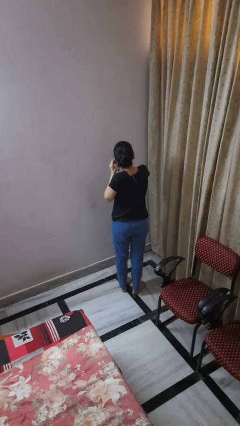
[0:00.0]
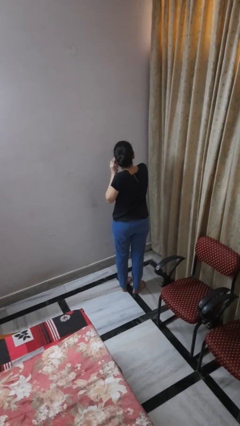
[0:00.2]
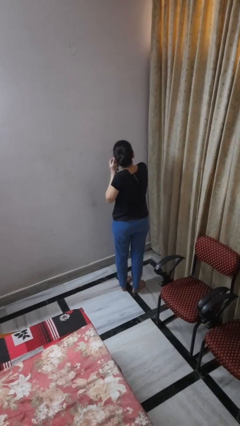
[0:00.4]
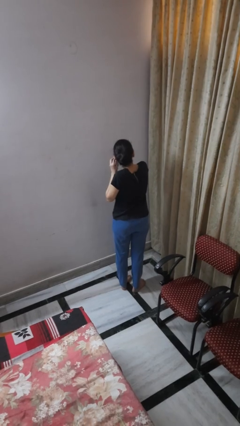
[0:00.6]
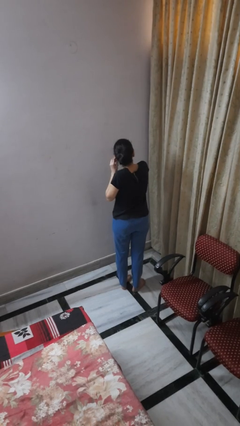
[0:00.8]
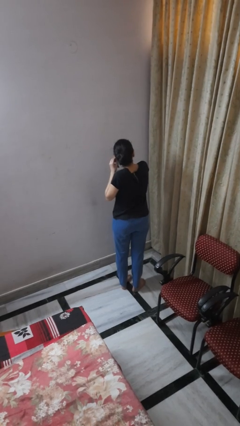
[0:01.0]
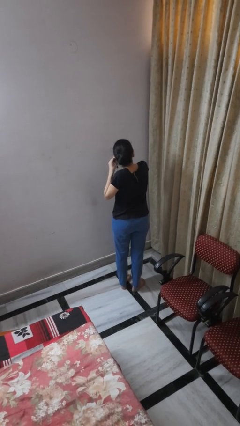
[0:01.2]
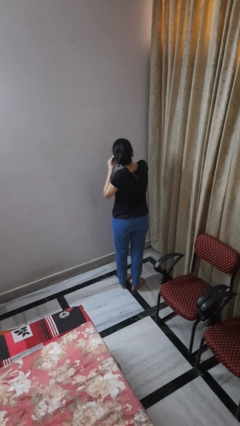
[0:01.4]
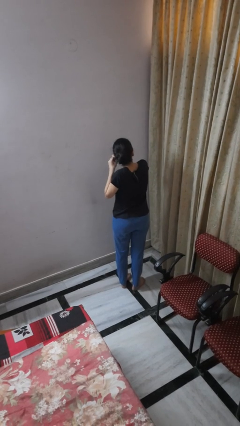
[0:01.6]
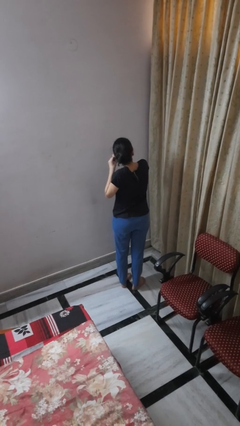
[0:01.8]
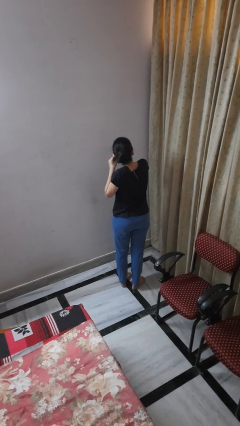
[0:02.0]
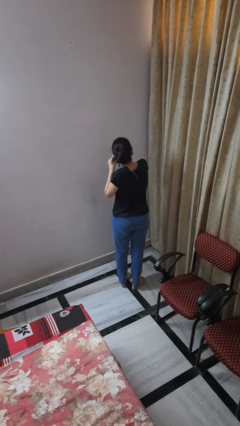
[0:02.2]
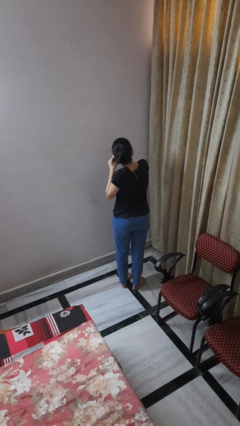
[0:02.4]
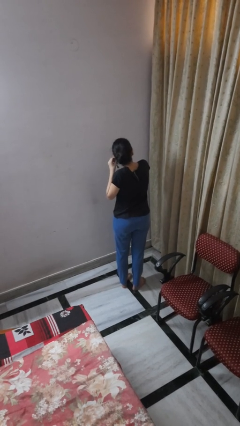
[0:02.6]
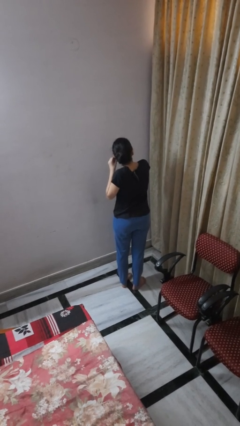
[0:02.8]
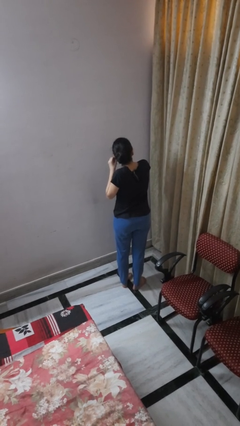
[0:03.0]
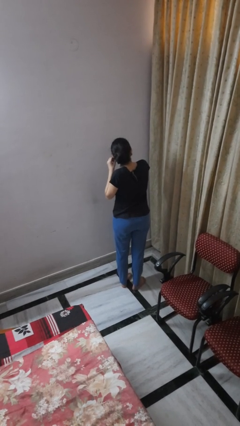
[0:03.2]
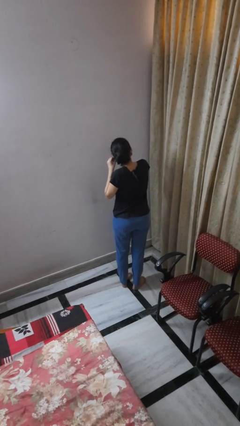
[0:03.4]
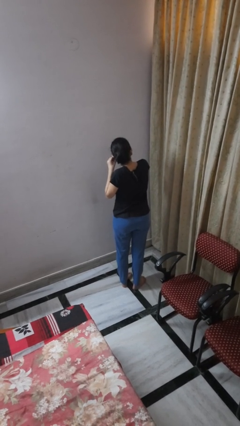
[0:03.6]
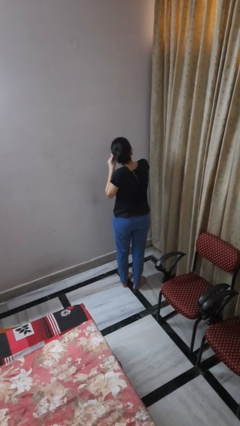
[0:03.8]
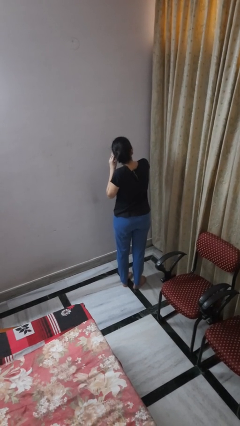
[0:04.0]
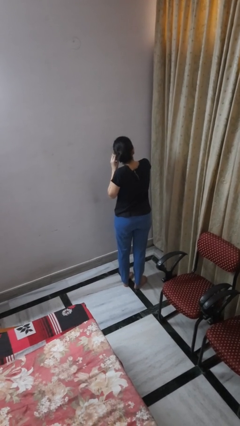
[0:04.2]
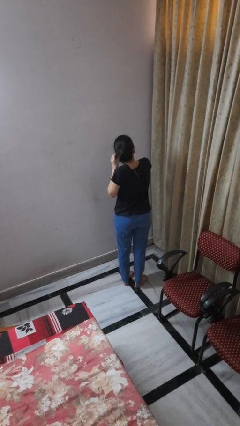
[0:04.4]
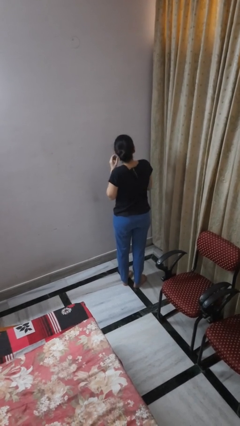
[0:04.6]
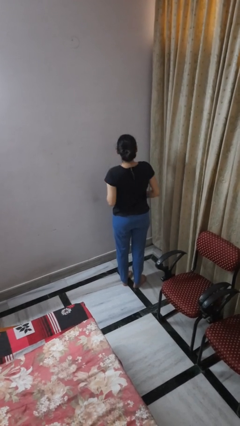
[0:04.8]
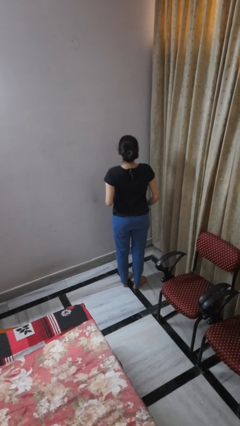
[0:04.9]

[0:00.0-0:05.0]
person takes off earrings

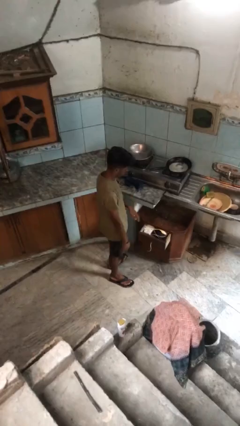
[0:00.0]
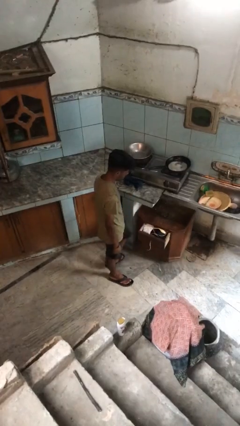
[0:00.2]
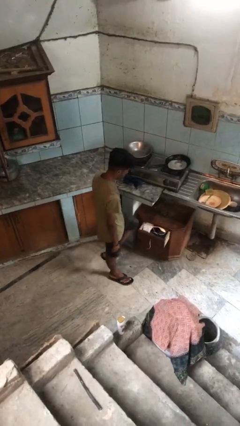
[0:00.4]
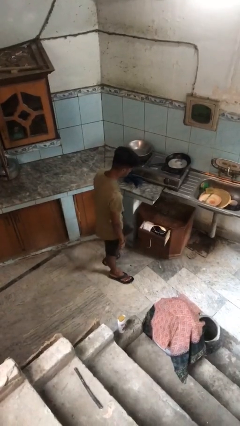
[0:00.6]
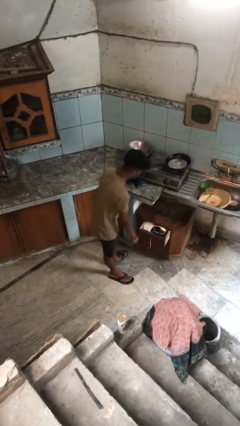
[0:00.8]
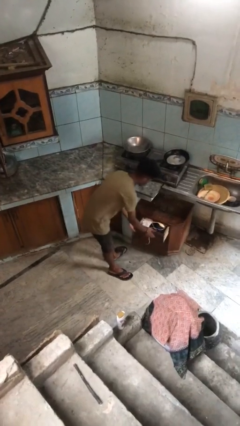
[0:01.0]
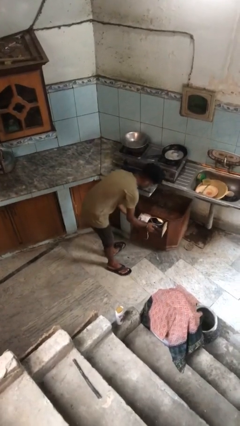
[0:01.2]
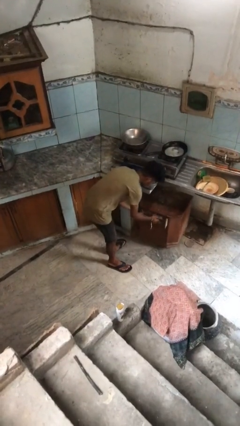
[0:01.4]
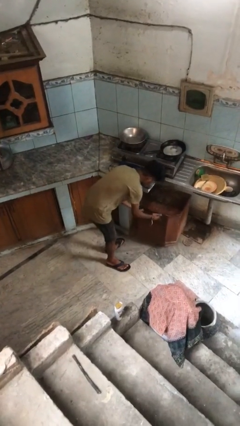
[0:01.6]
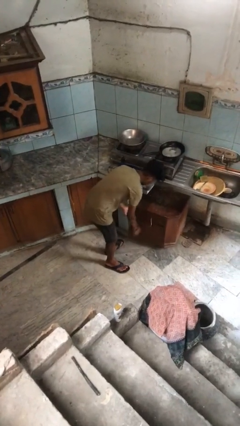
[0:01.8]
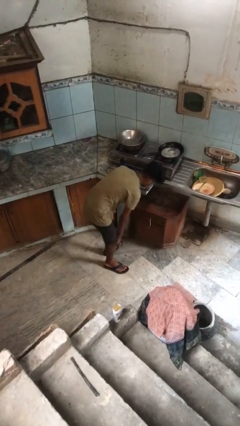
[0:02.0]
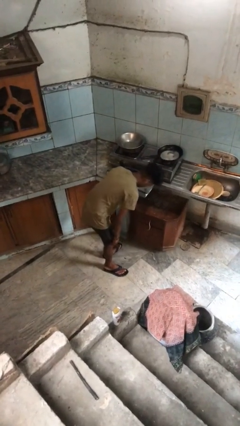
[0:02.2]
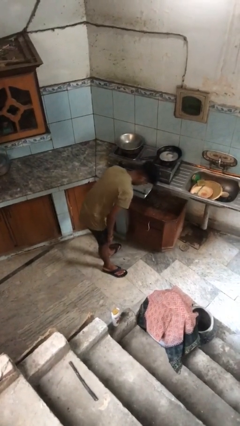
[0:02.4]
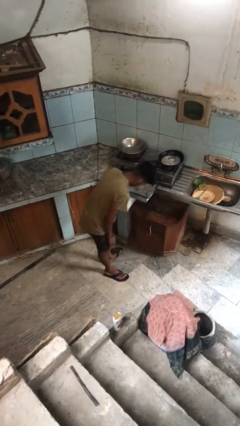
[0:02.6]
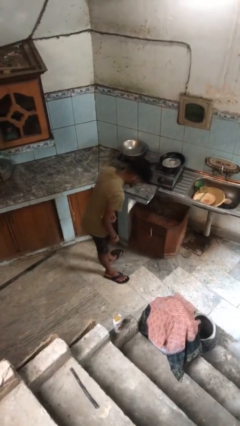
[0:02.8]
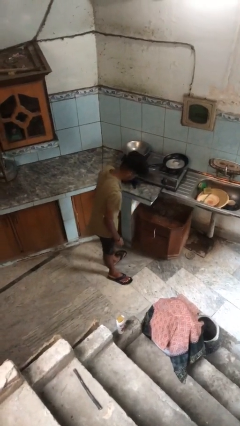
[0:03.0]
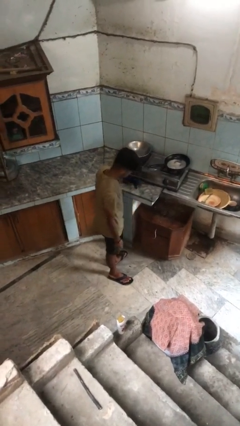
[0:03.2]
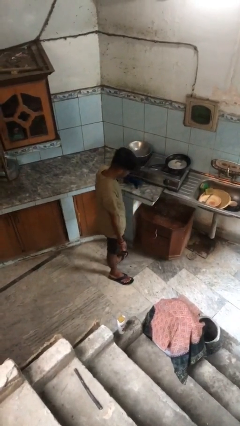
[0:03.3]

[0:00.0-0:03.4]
person closes kitchen drawer

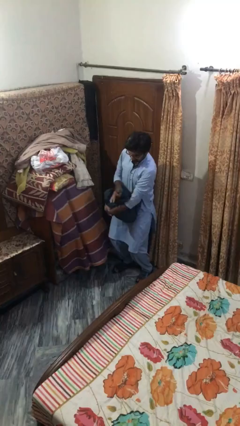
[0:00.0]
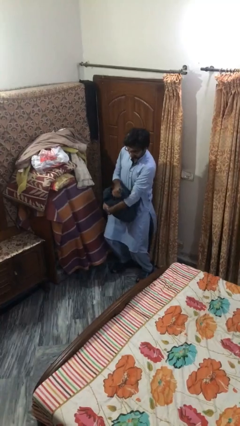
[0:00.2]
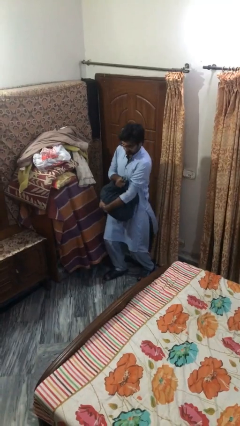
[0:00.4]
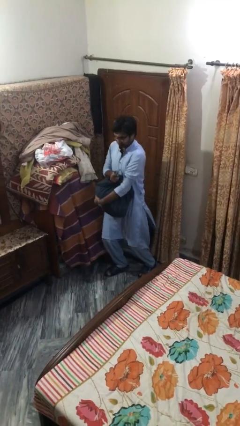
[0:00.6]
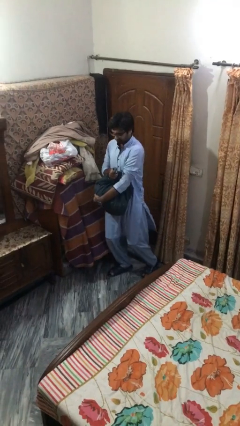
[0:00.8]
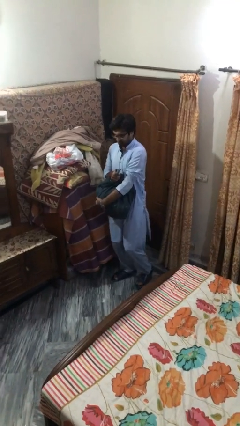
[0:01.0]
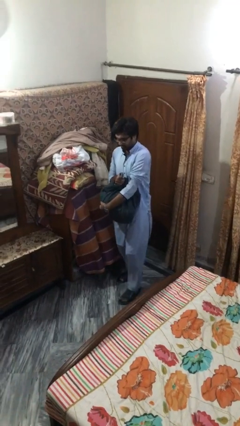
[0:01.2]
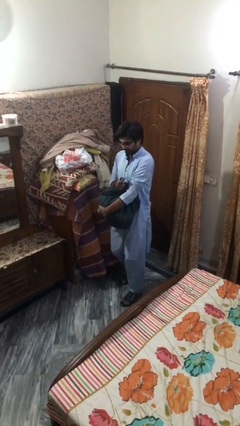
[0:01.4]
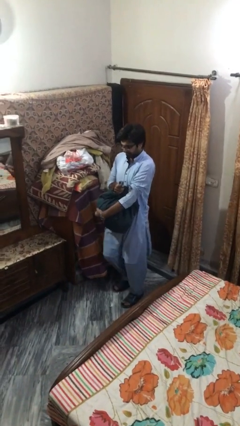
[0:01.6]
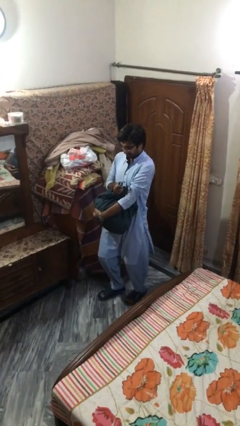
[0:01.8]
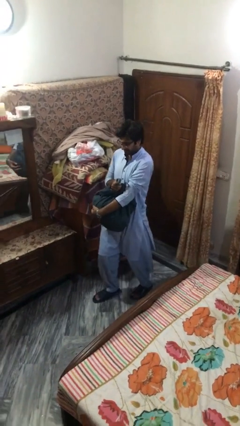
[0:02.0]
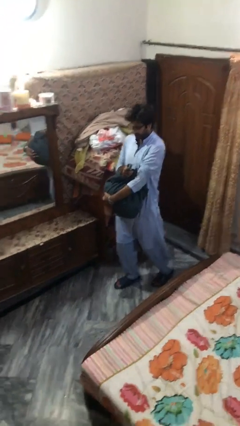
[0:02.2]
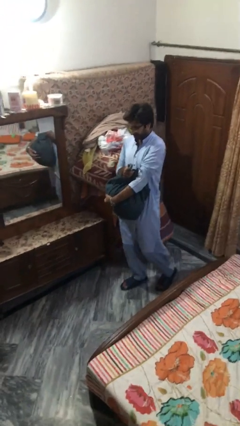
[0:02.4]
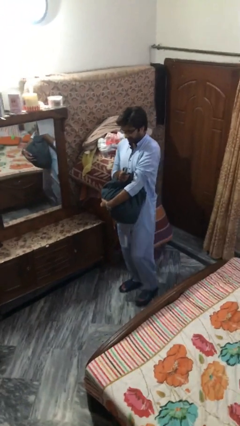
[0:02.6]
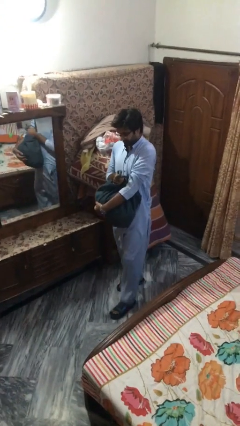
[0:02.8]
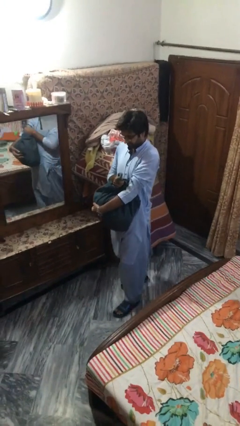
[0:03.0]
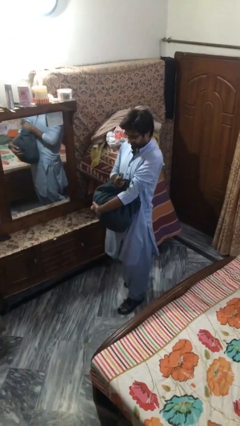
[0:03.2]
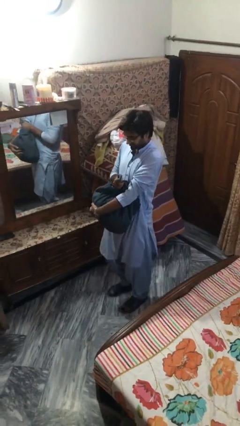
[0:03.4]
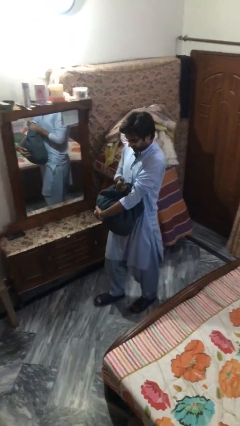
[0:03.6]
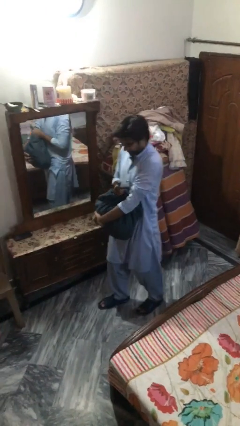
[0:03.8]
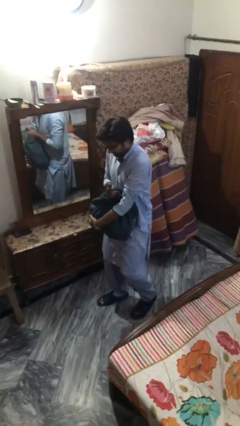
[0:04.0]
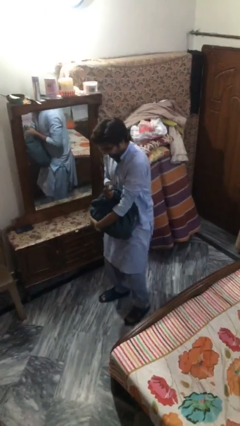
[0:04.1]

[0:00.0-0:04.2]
person carries heavy object

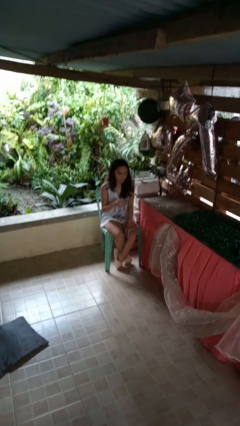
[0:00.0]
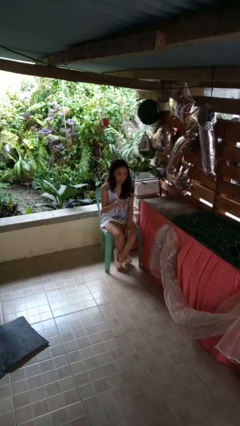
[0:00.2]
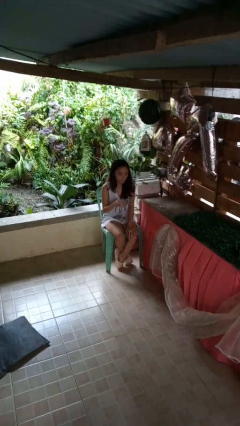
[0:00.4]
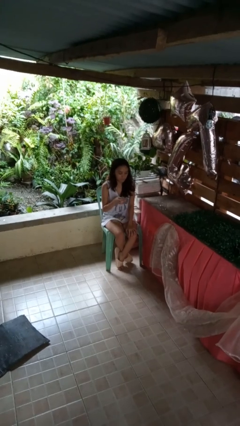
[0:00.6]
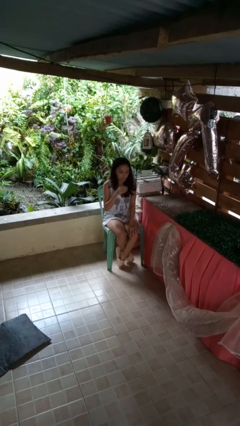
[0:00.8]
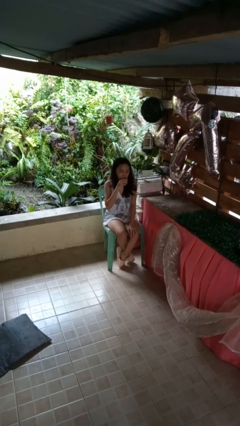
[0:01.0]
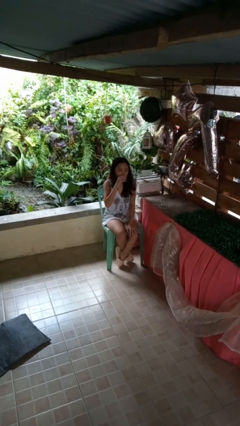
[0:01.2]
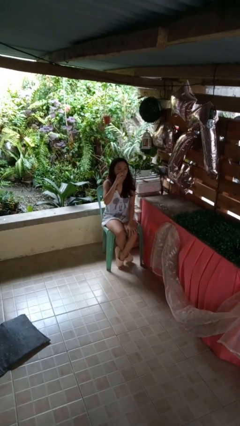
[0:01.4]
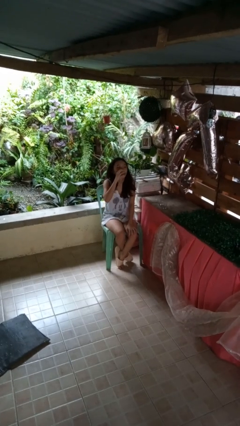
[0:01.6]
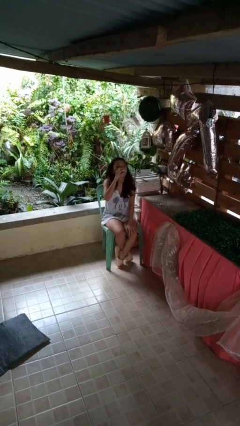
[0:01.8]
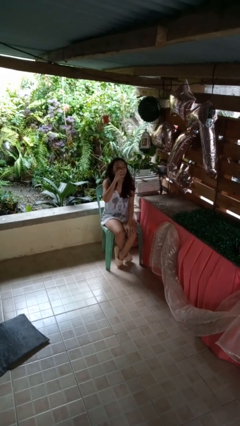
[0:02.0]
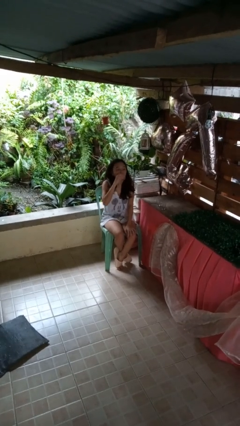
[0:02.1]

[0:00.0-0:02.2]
person drinks from shotglass

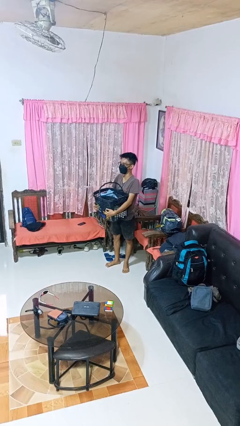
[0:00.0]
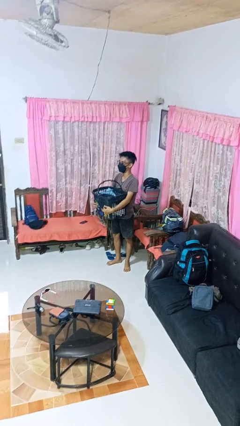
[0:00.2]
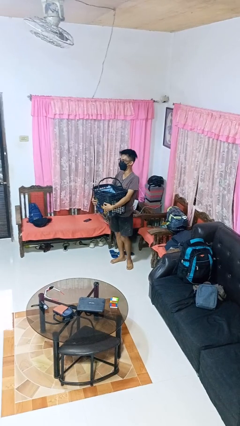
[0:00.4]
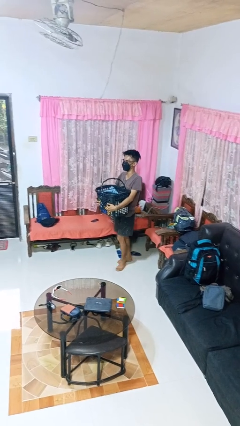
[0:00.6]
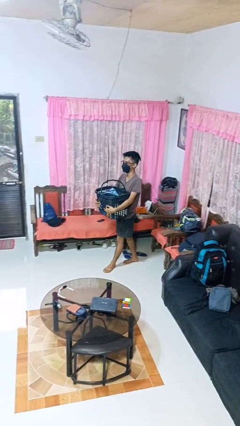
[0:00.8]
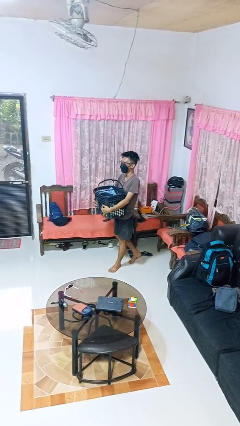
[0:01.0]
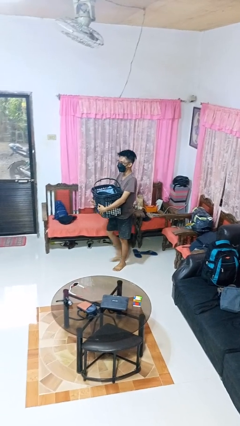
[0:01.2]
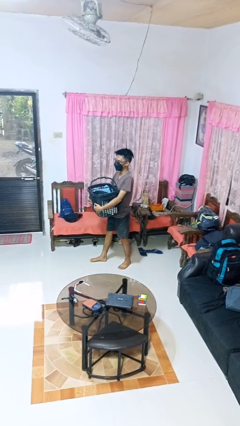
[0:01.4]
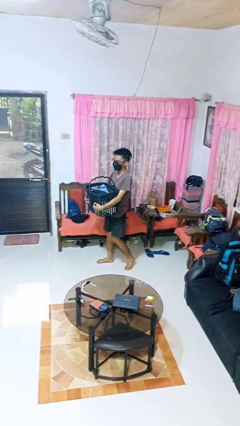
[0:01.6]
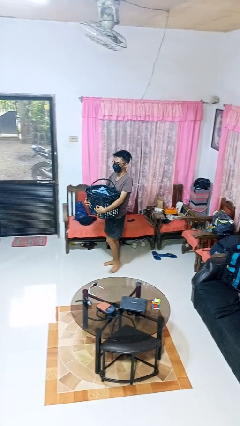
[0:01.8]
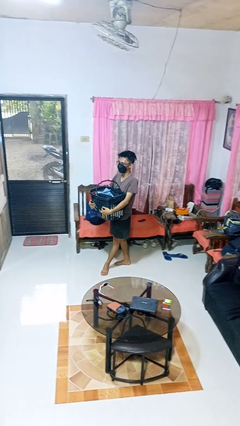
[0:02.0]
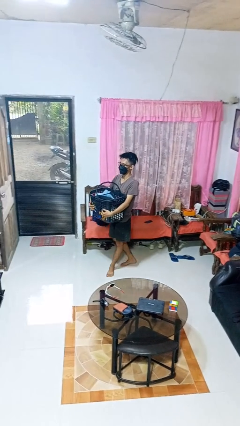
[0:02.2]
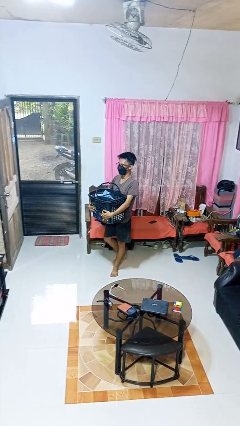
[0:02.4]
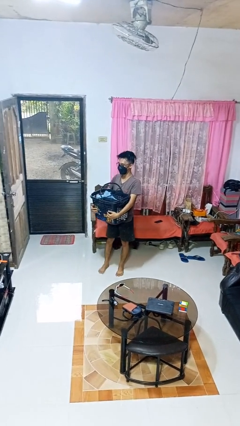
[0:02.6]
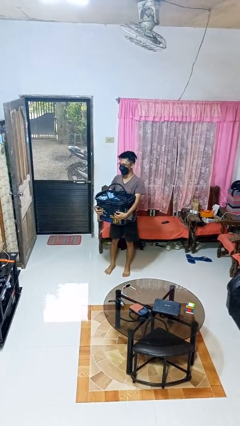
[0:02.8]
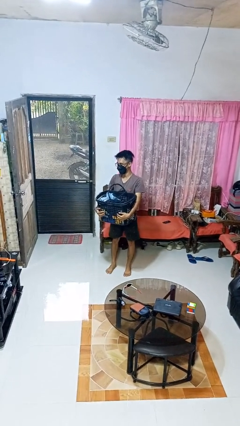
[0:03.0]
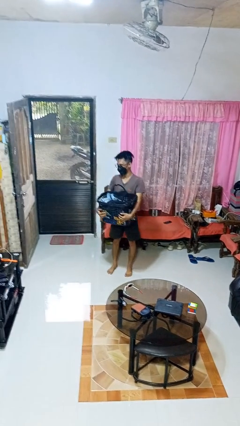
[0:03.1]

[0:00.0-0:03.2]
person carries laundry basket
